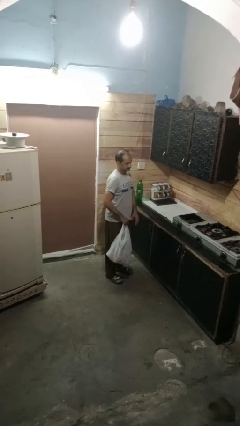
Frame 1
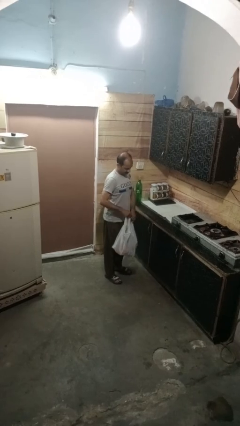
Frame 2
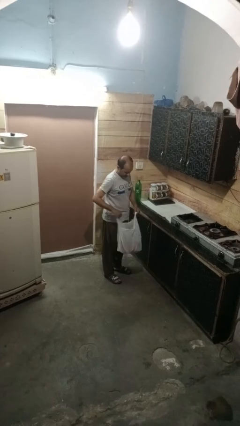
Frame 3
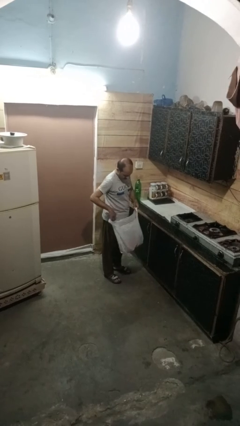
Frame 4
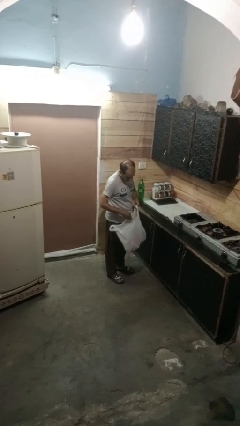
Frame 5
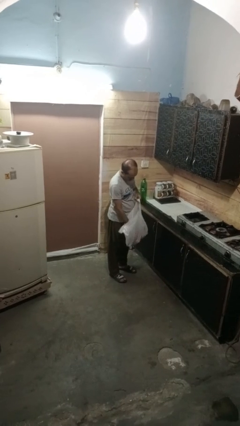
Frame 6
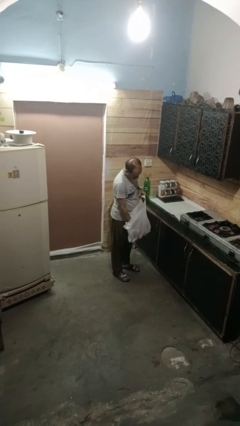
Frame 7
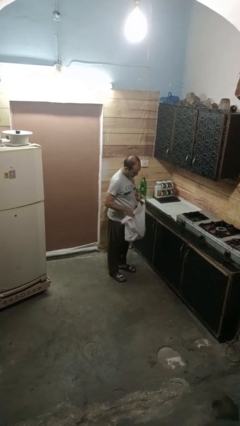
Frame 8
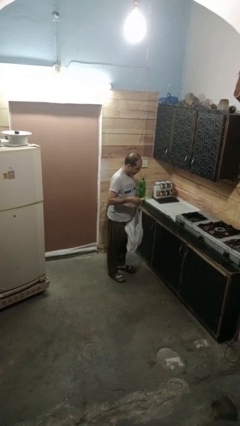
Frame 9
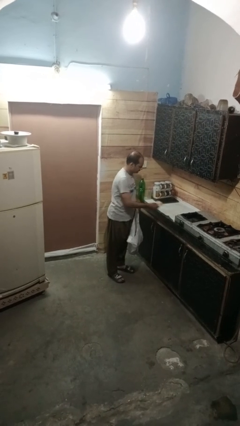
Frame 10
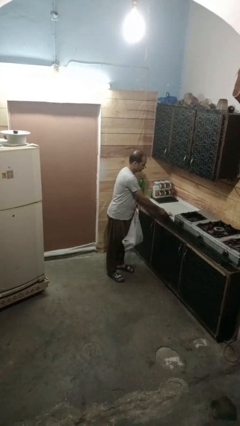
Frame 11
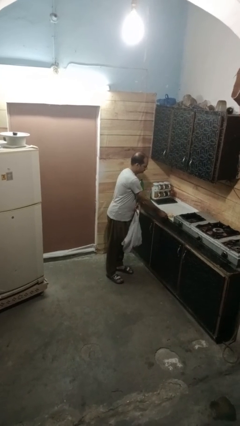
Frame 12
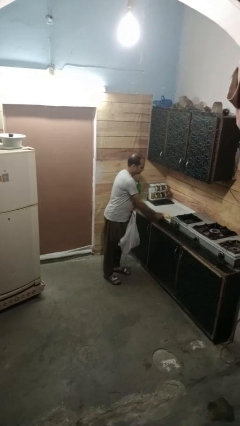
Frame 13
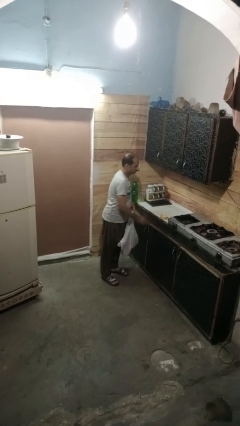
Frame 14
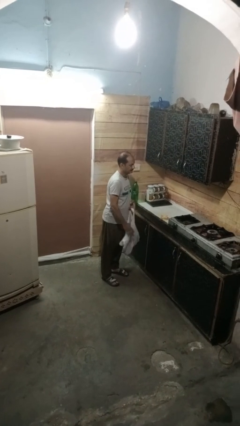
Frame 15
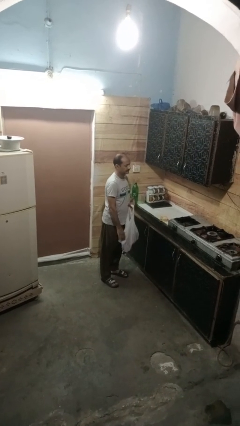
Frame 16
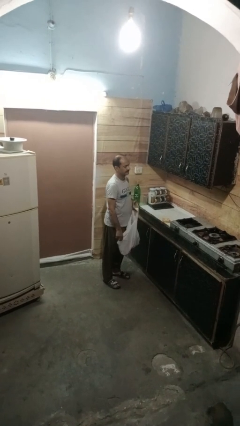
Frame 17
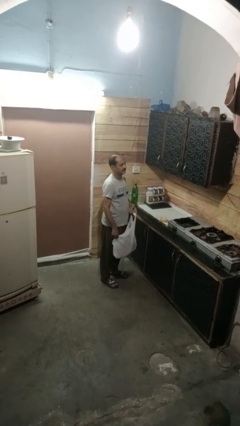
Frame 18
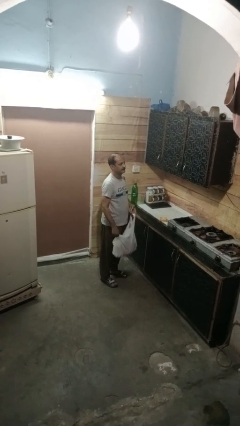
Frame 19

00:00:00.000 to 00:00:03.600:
person takes object from bag

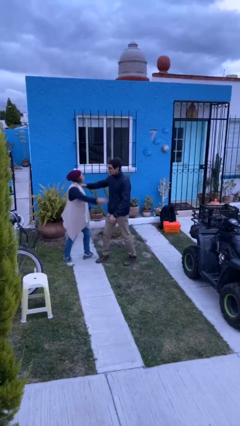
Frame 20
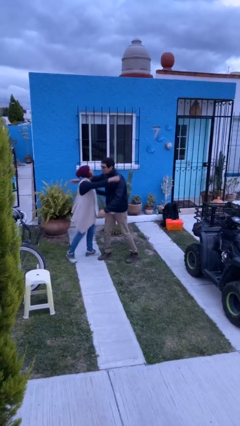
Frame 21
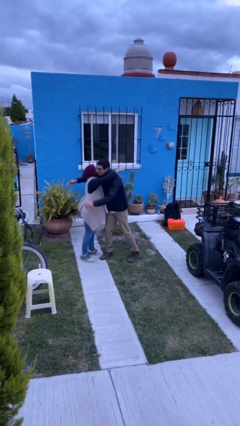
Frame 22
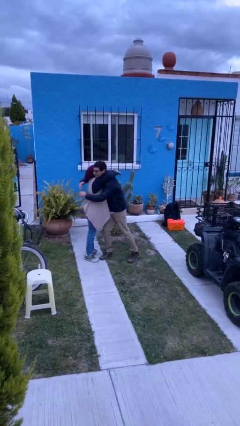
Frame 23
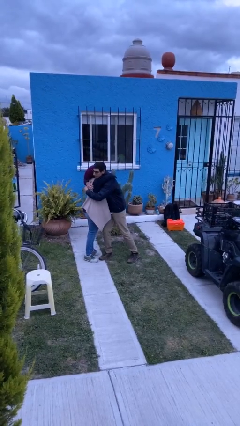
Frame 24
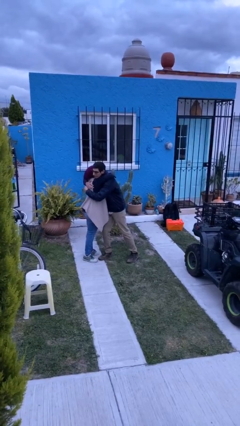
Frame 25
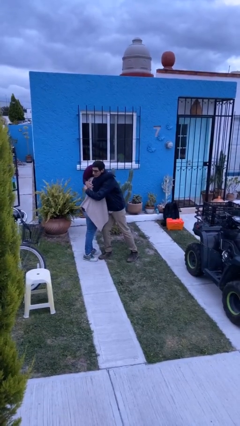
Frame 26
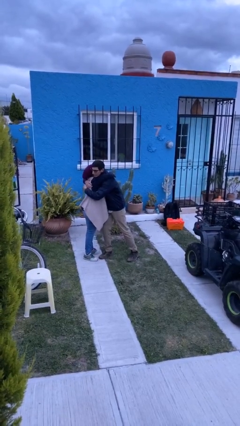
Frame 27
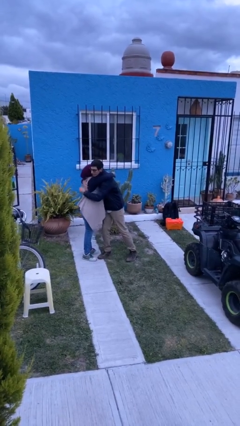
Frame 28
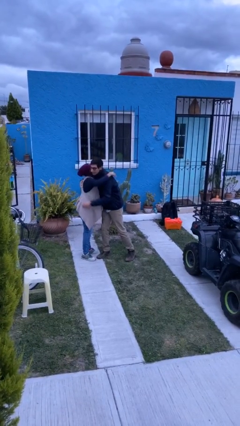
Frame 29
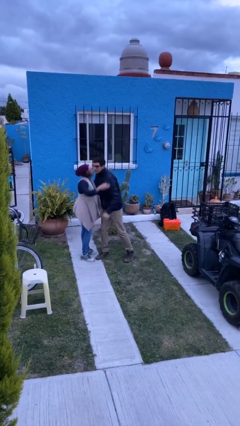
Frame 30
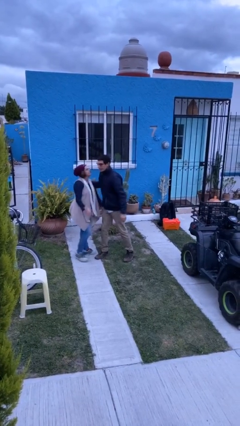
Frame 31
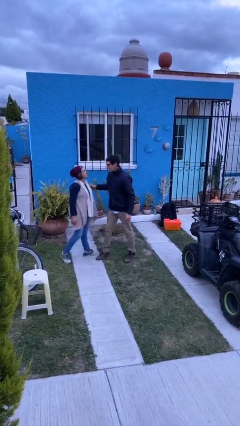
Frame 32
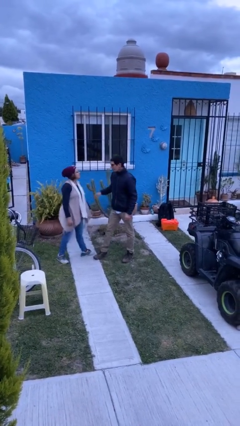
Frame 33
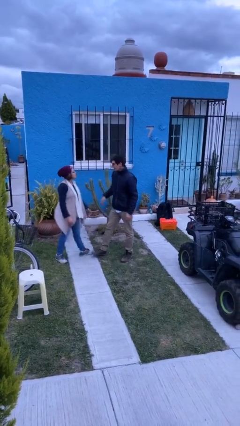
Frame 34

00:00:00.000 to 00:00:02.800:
person embraces person

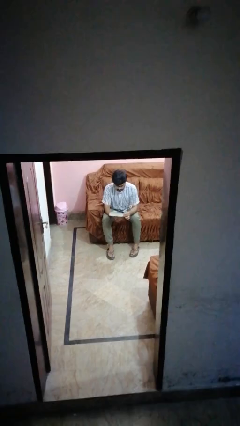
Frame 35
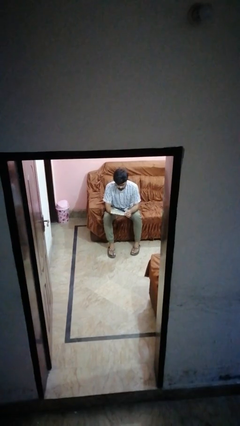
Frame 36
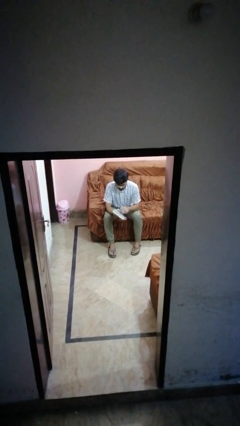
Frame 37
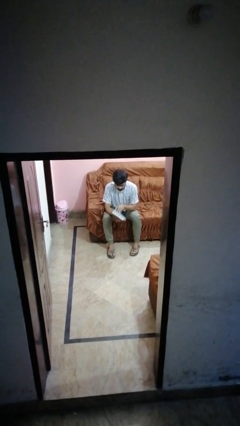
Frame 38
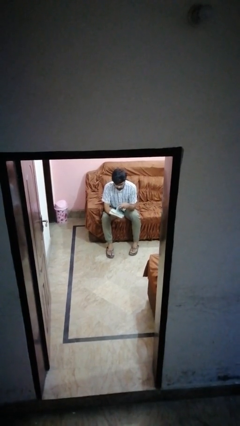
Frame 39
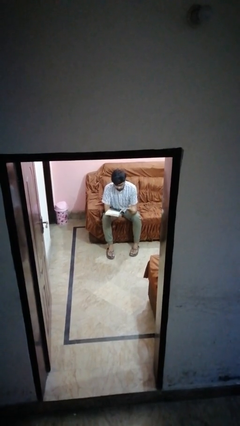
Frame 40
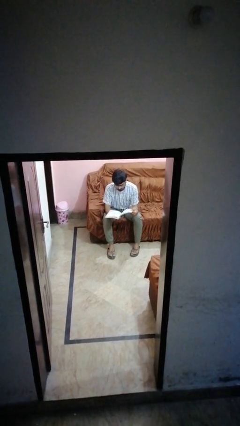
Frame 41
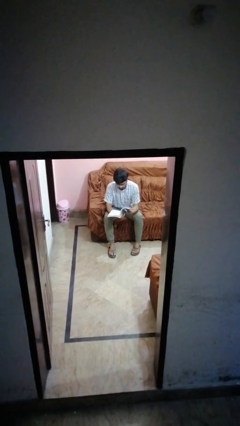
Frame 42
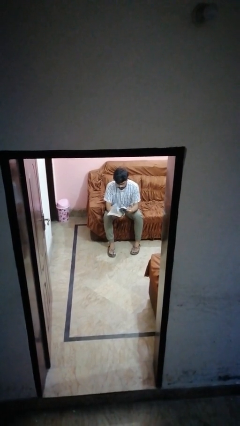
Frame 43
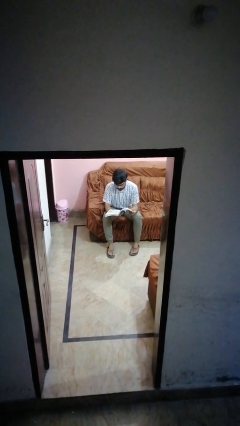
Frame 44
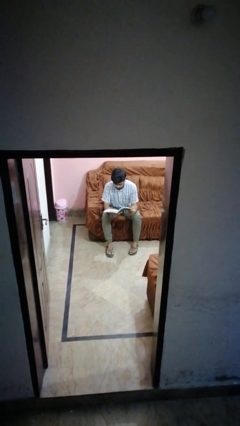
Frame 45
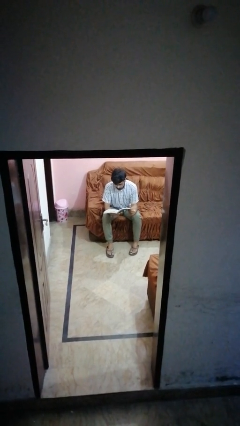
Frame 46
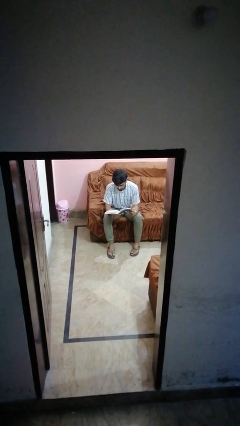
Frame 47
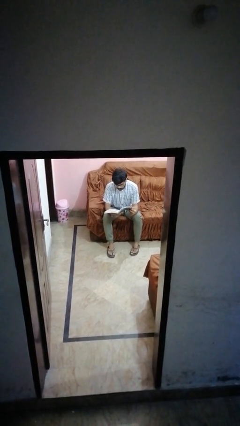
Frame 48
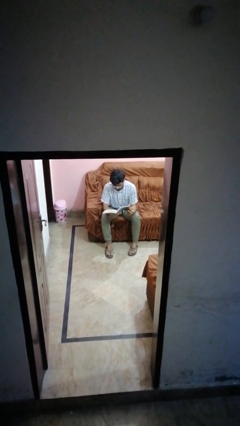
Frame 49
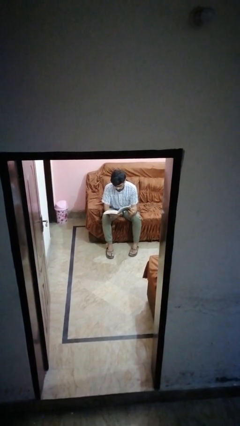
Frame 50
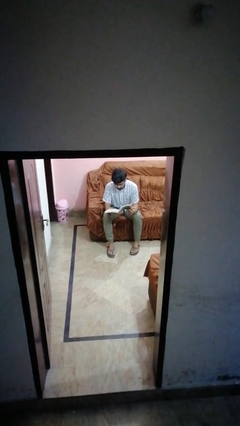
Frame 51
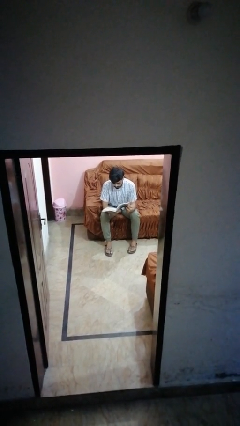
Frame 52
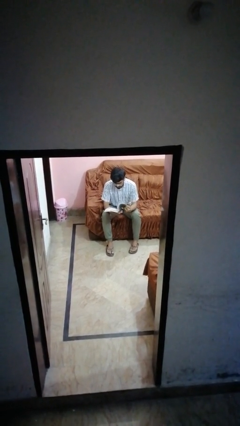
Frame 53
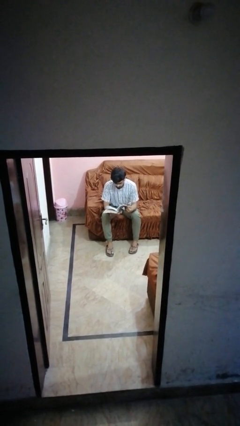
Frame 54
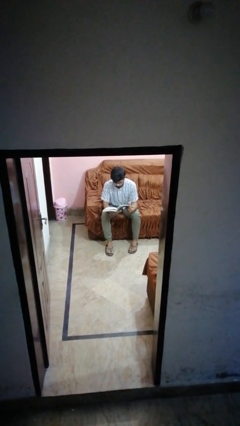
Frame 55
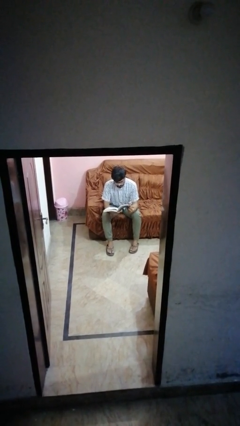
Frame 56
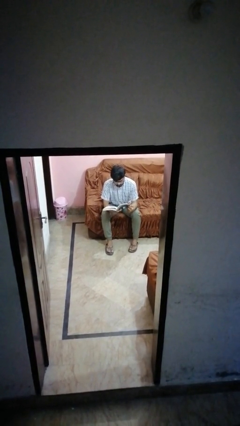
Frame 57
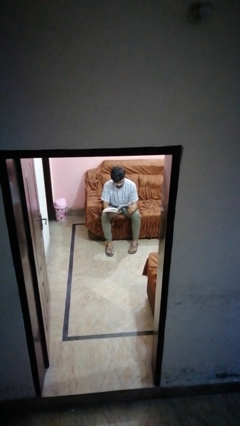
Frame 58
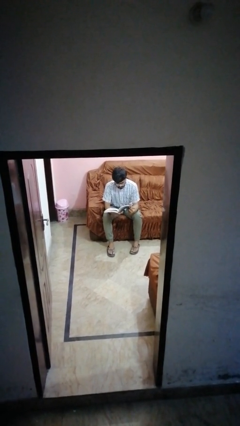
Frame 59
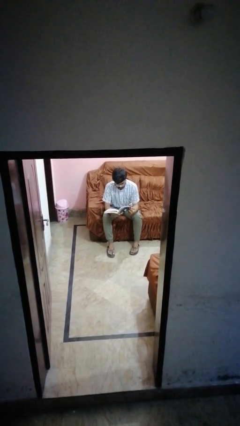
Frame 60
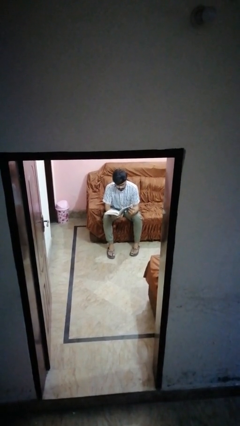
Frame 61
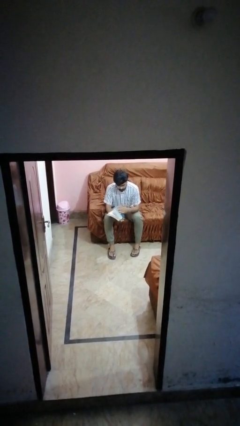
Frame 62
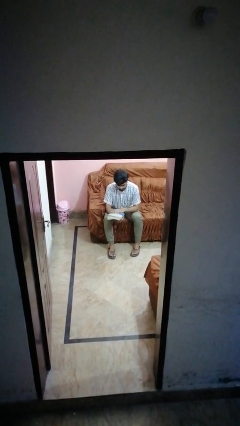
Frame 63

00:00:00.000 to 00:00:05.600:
person reads book

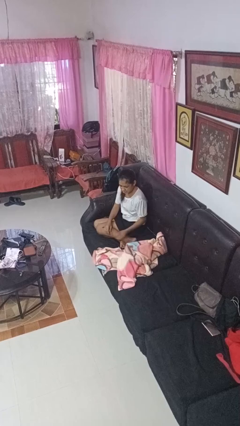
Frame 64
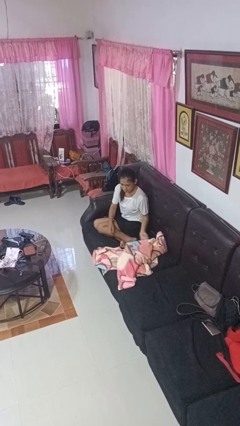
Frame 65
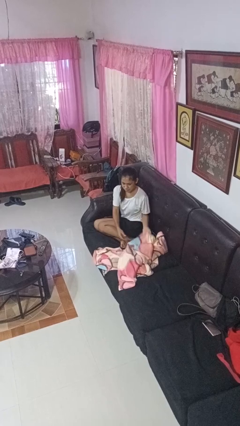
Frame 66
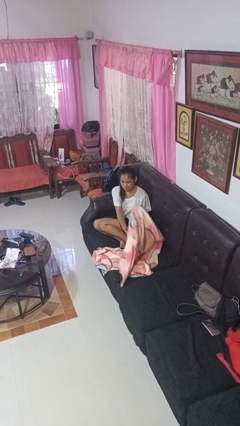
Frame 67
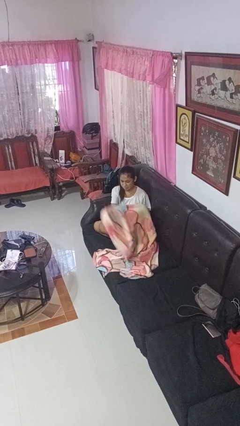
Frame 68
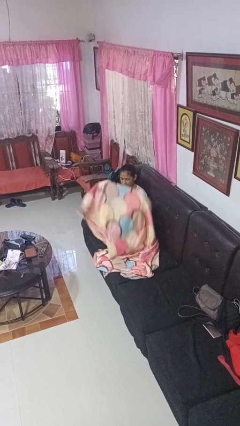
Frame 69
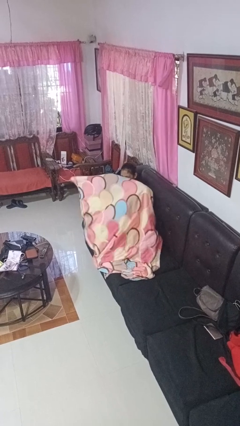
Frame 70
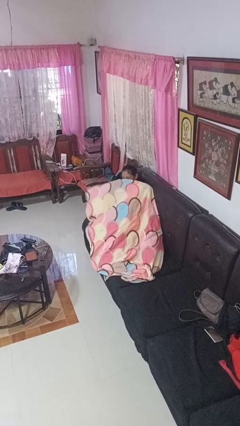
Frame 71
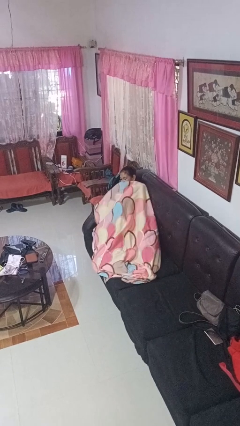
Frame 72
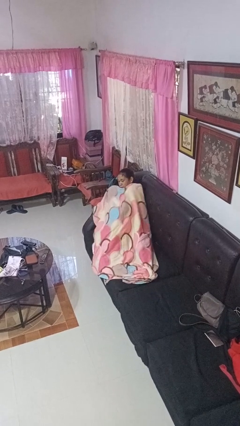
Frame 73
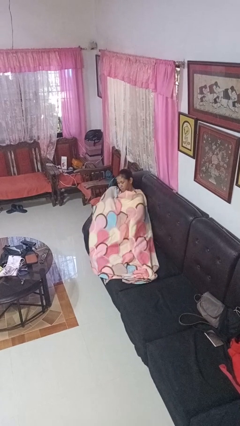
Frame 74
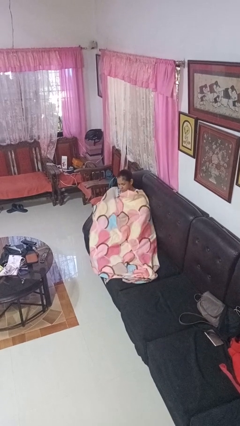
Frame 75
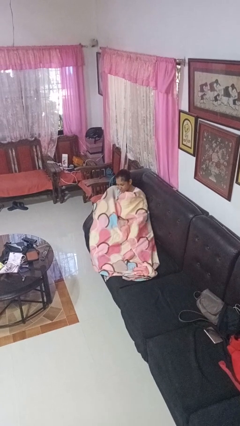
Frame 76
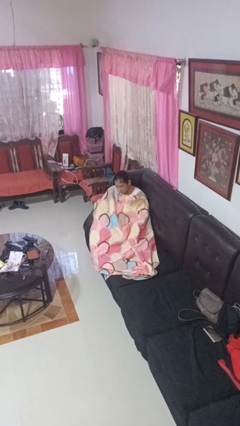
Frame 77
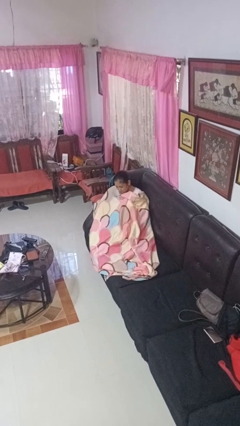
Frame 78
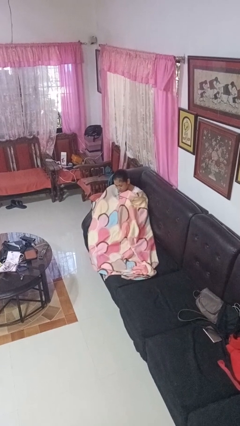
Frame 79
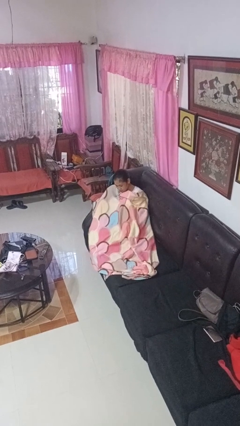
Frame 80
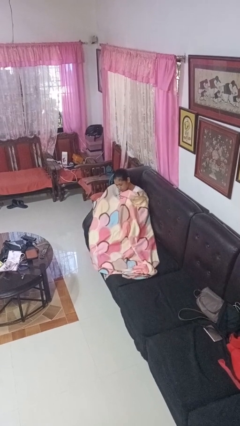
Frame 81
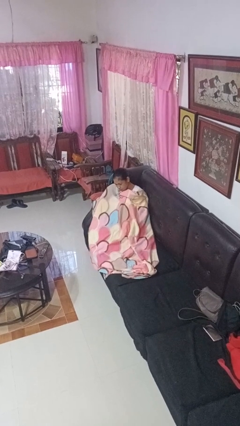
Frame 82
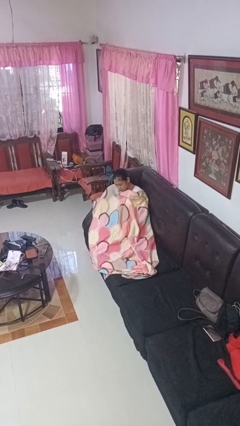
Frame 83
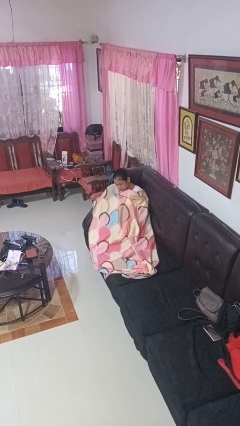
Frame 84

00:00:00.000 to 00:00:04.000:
person covers with blanket

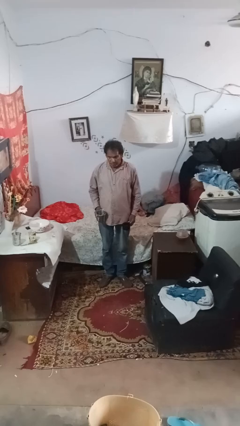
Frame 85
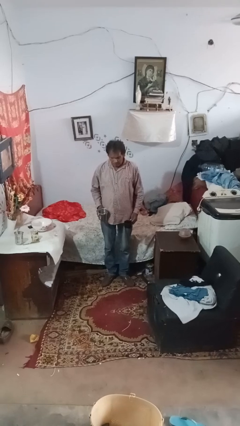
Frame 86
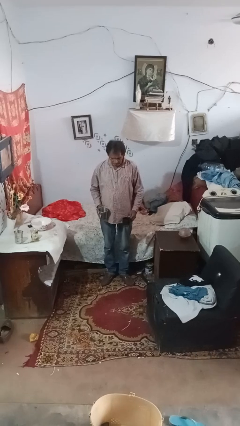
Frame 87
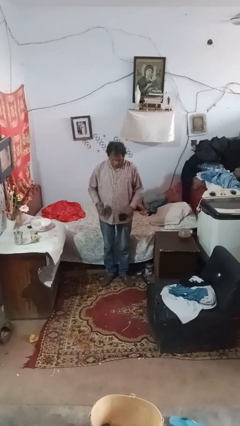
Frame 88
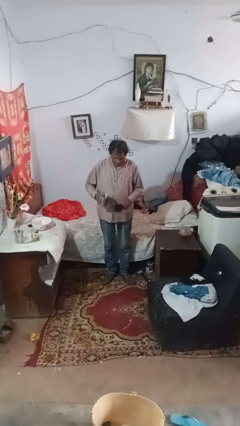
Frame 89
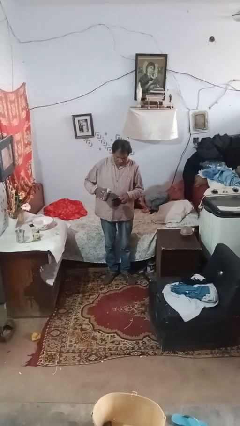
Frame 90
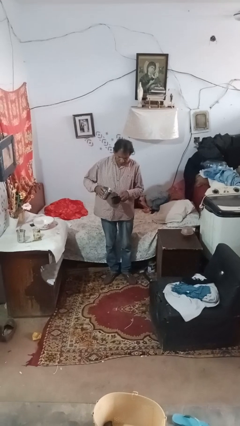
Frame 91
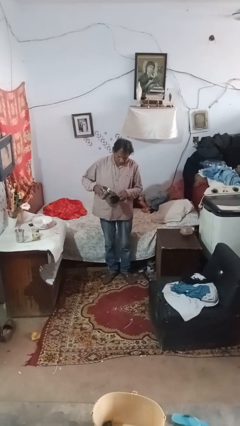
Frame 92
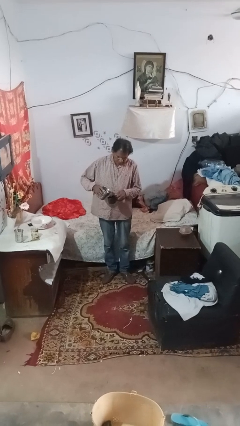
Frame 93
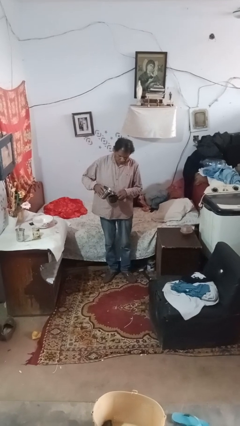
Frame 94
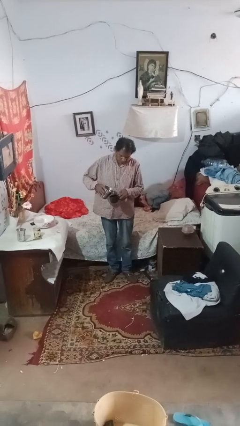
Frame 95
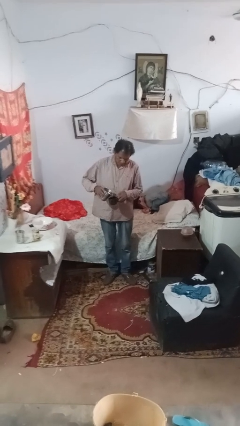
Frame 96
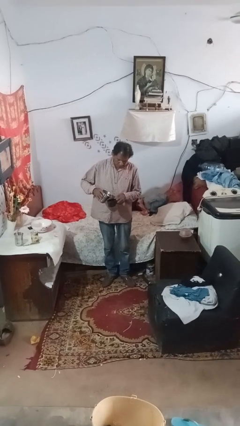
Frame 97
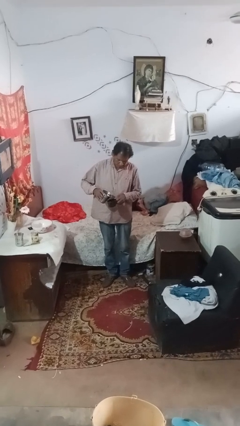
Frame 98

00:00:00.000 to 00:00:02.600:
person pours liquid into cup
